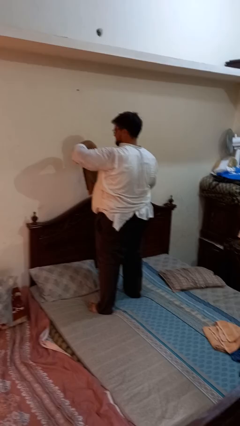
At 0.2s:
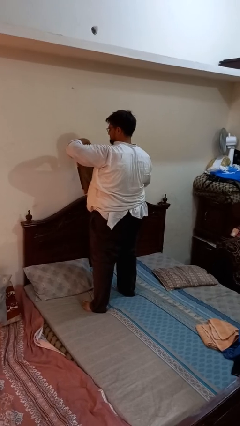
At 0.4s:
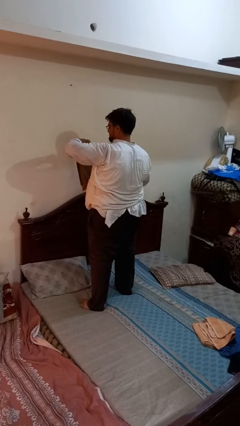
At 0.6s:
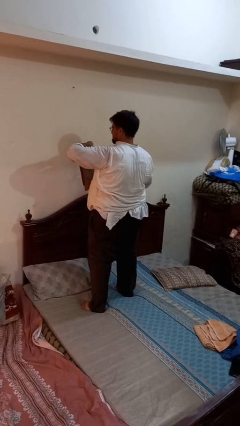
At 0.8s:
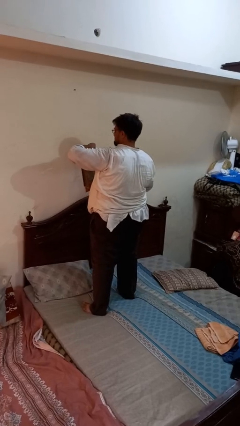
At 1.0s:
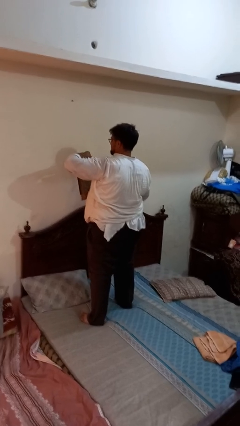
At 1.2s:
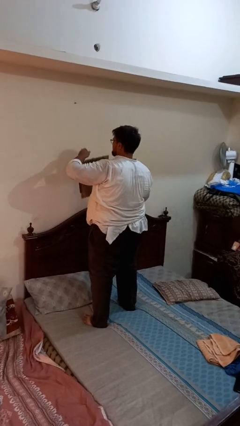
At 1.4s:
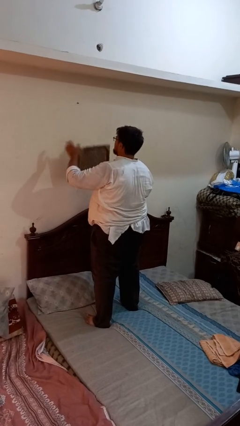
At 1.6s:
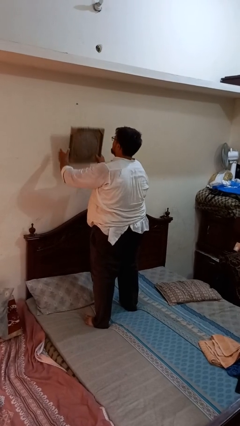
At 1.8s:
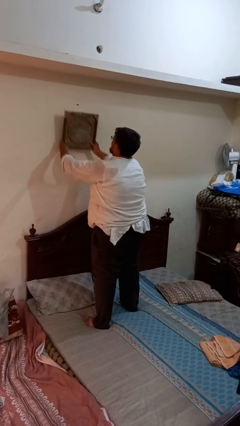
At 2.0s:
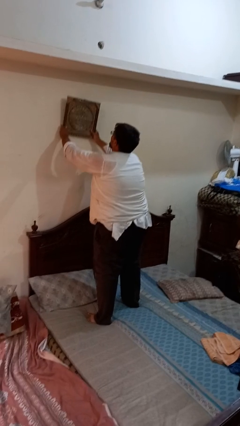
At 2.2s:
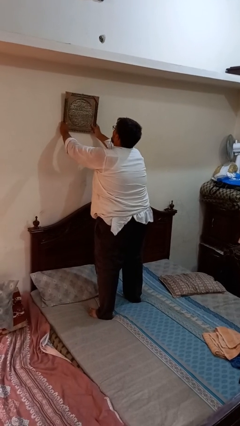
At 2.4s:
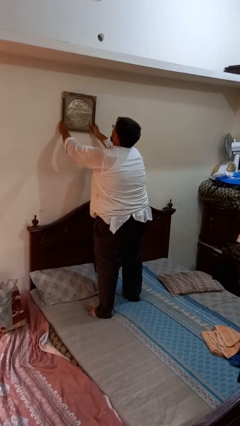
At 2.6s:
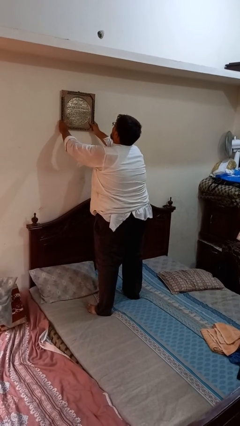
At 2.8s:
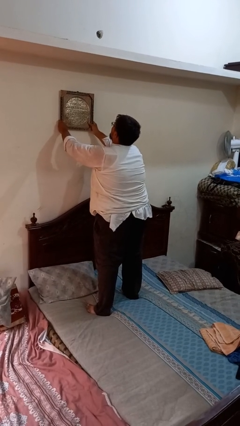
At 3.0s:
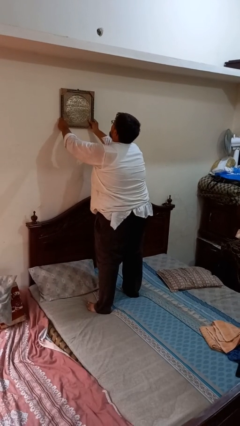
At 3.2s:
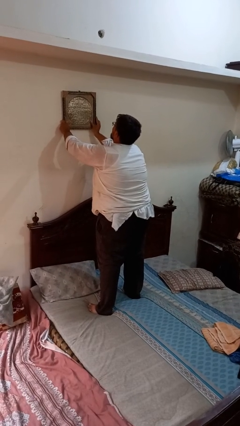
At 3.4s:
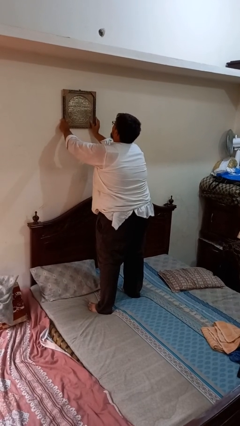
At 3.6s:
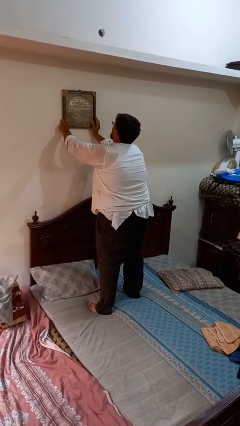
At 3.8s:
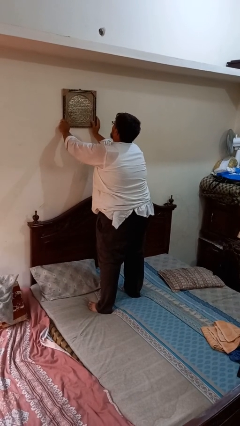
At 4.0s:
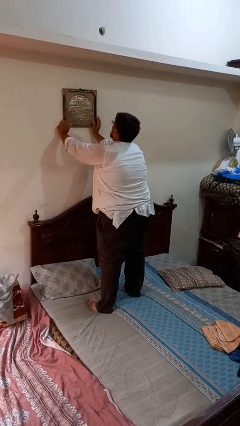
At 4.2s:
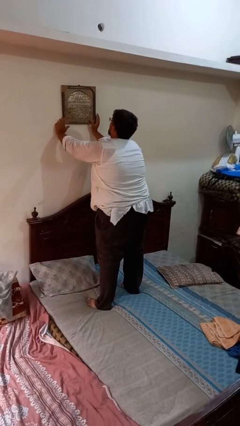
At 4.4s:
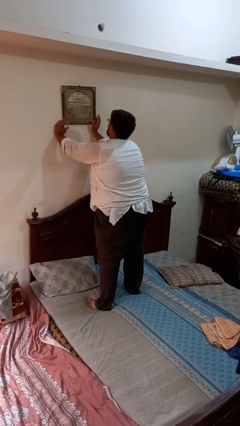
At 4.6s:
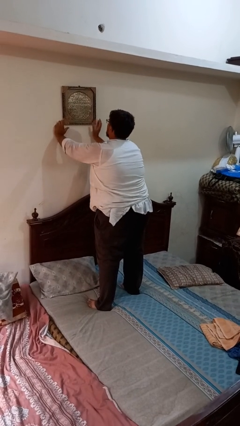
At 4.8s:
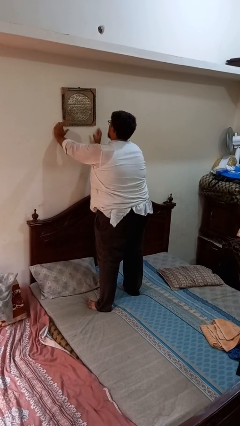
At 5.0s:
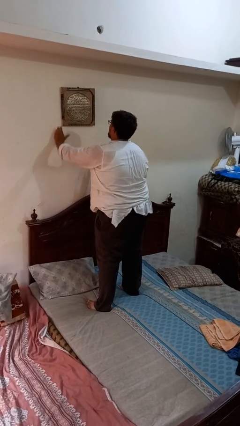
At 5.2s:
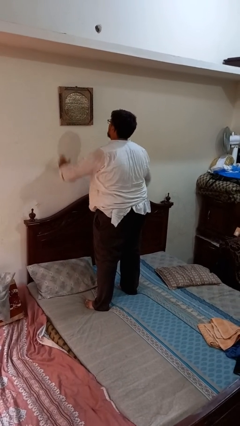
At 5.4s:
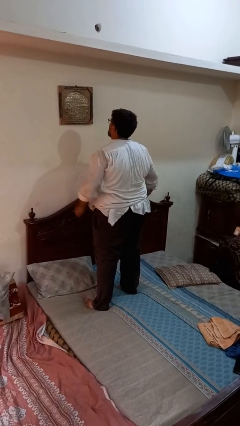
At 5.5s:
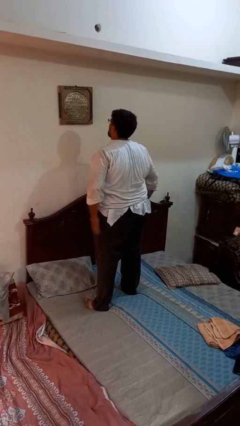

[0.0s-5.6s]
person puts up picture frame

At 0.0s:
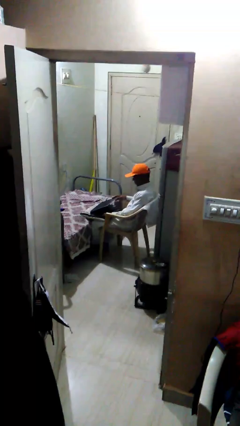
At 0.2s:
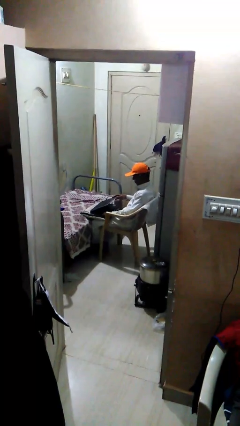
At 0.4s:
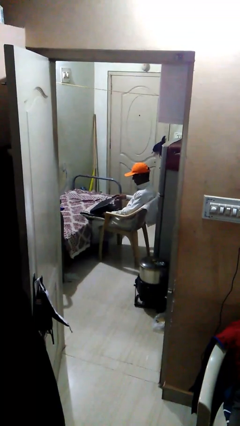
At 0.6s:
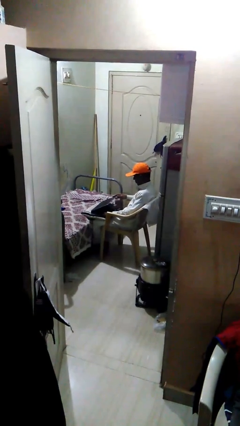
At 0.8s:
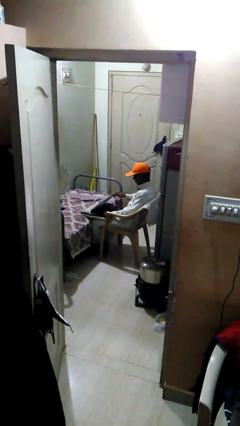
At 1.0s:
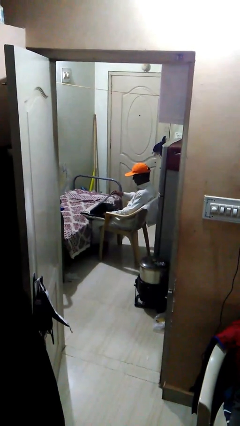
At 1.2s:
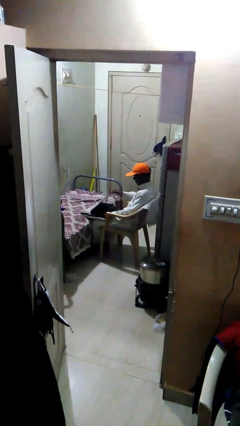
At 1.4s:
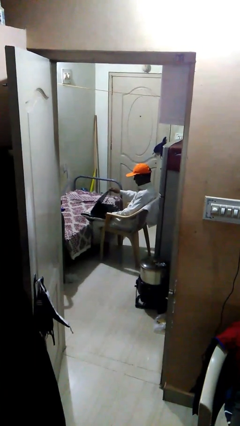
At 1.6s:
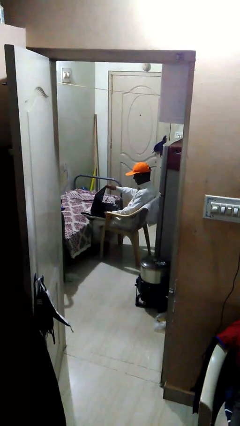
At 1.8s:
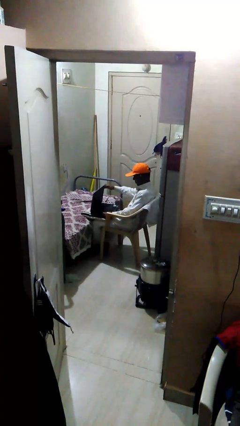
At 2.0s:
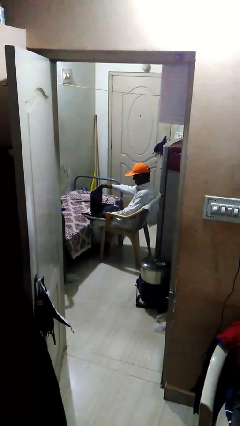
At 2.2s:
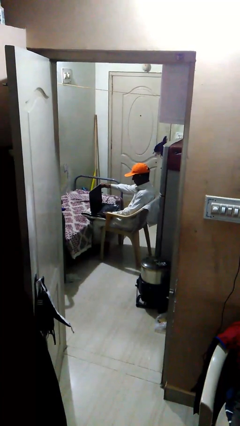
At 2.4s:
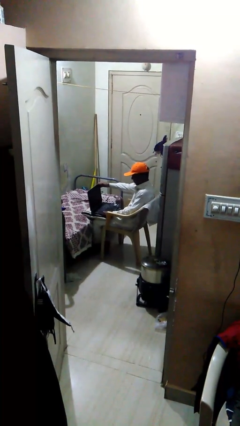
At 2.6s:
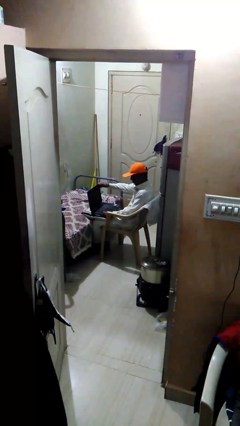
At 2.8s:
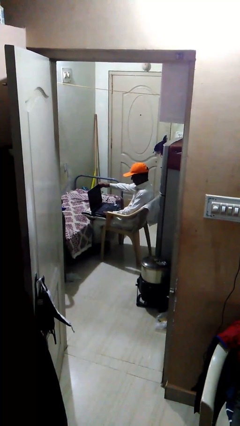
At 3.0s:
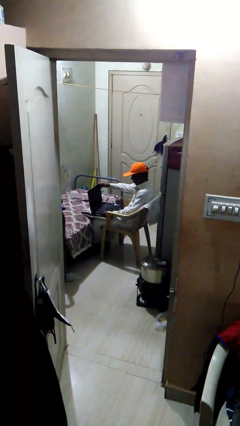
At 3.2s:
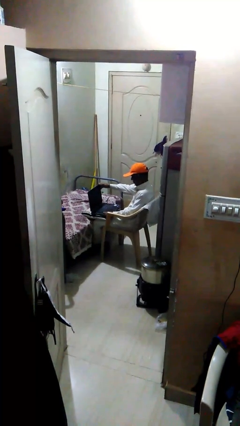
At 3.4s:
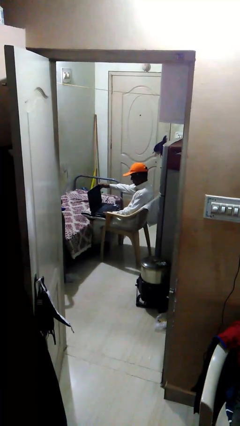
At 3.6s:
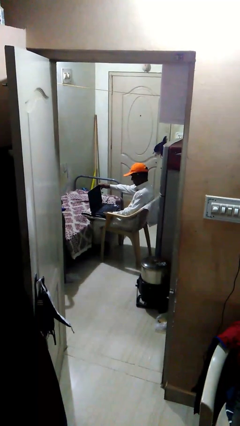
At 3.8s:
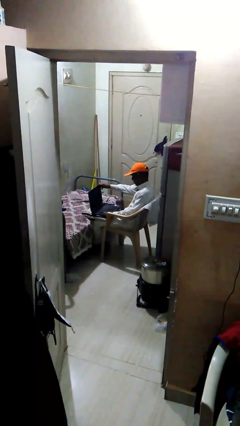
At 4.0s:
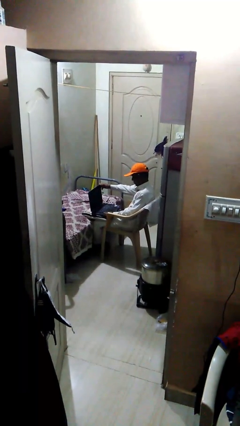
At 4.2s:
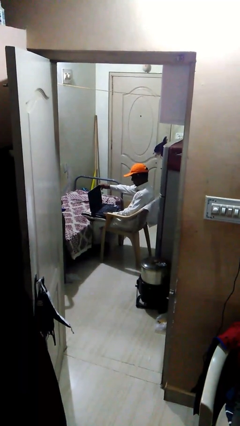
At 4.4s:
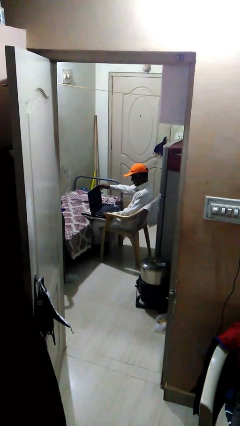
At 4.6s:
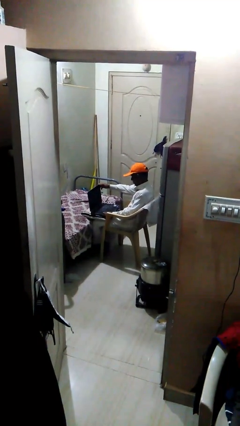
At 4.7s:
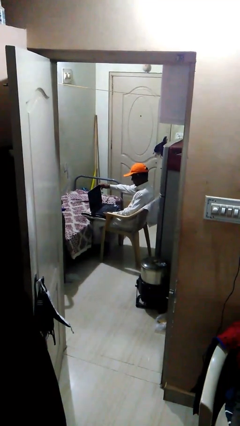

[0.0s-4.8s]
person interacts with laptop

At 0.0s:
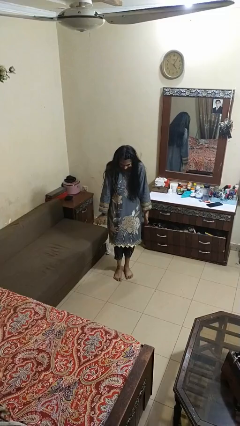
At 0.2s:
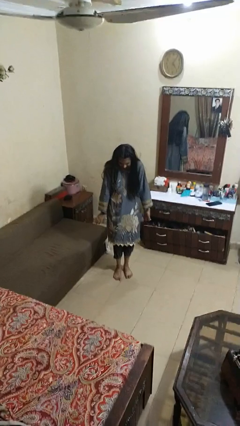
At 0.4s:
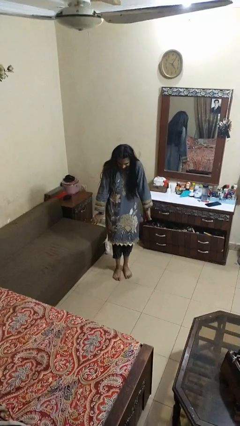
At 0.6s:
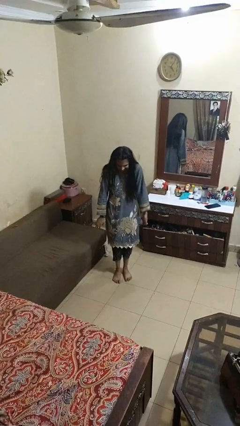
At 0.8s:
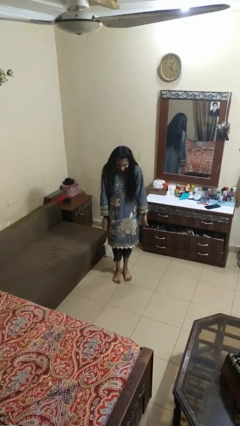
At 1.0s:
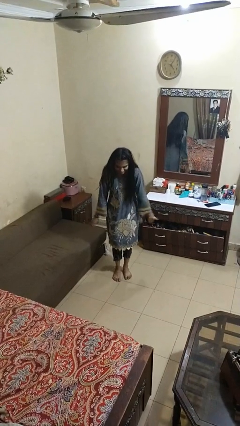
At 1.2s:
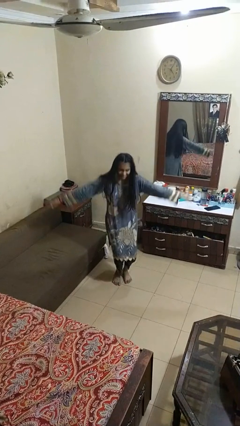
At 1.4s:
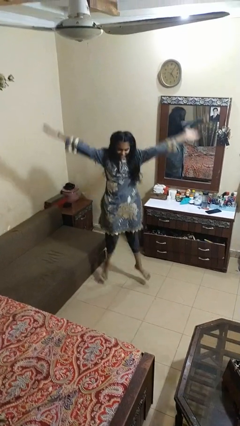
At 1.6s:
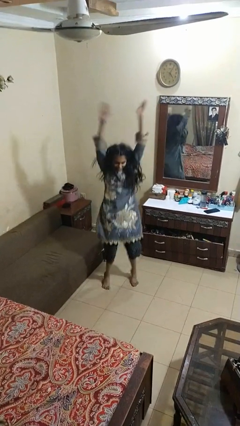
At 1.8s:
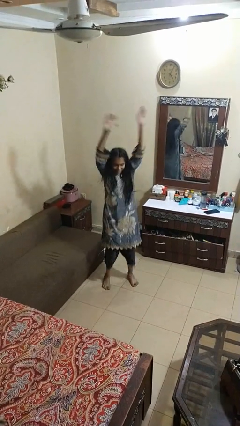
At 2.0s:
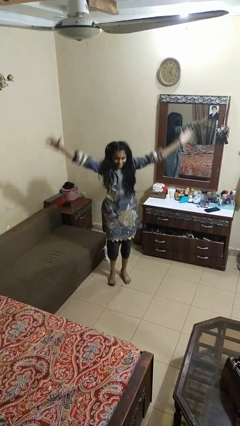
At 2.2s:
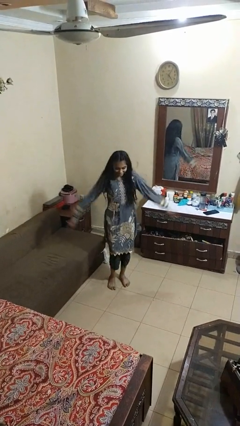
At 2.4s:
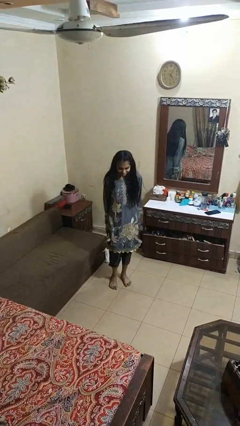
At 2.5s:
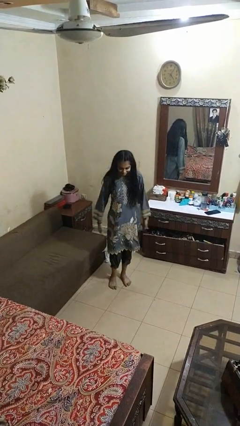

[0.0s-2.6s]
person exercises with jumping jacks

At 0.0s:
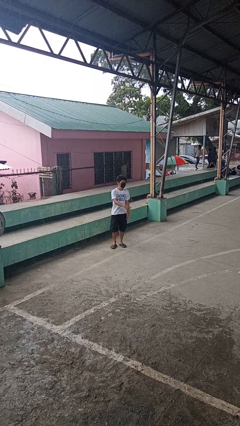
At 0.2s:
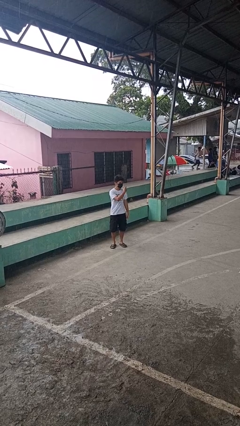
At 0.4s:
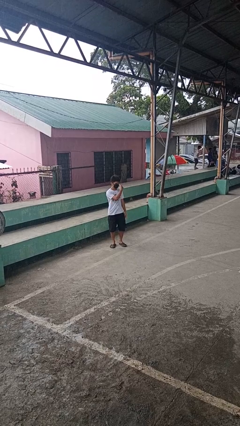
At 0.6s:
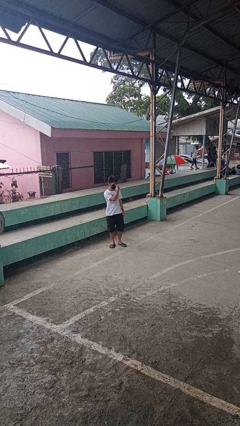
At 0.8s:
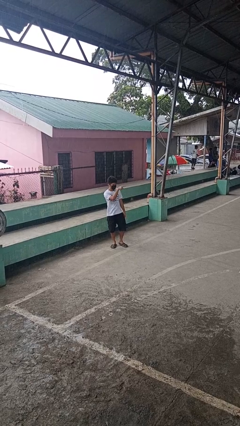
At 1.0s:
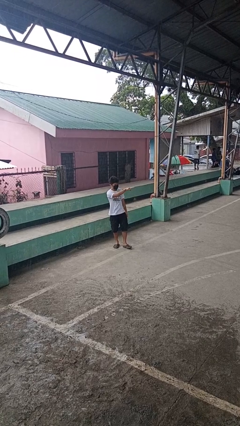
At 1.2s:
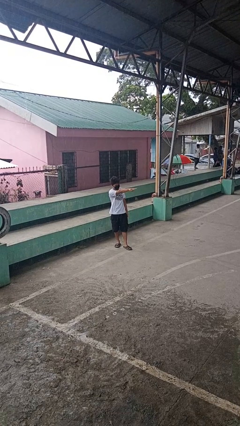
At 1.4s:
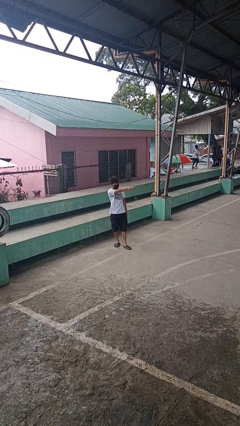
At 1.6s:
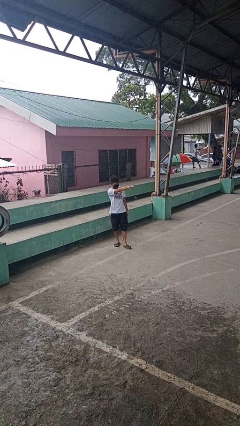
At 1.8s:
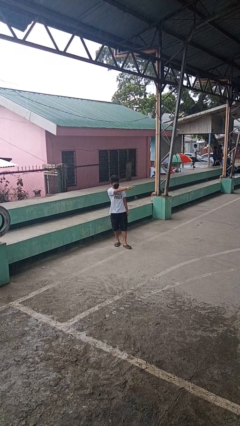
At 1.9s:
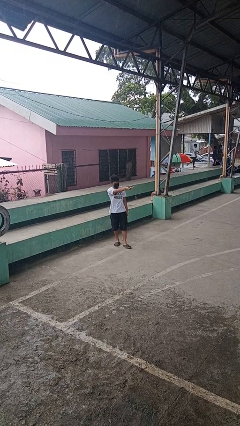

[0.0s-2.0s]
person gestures watch closely

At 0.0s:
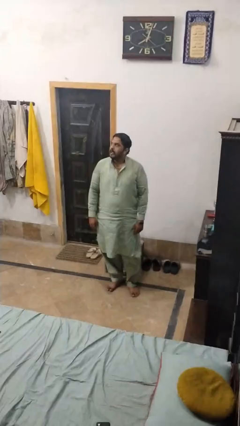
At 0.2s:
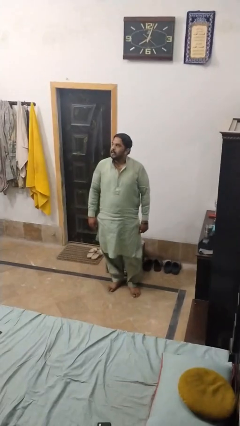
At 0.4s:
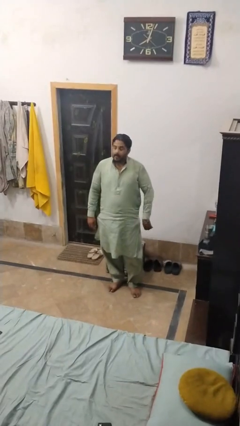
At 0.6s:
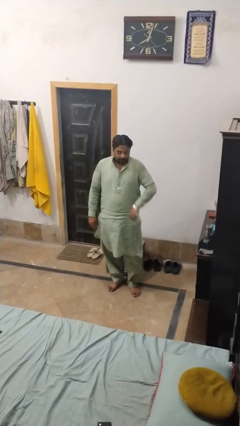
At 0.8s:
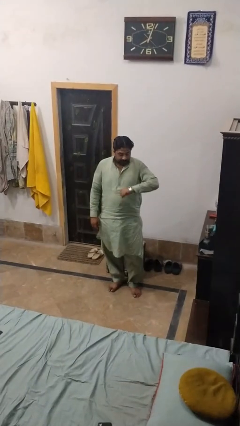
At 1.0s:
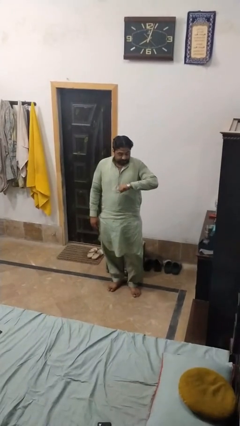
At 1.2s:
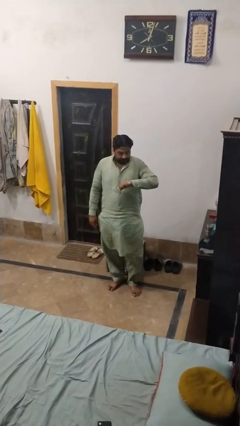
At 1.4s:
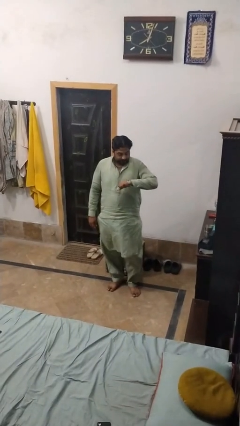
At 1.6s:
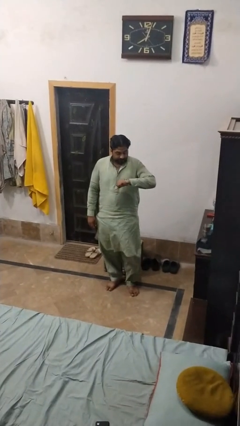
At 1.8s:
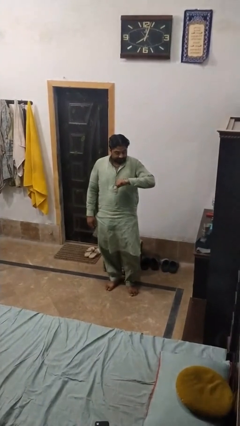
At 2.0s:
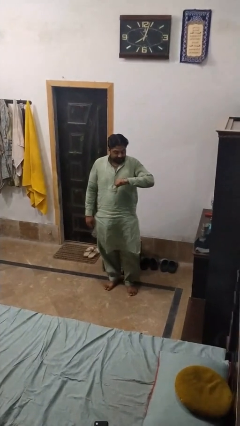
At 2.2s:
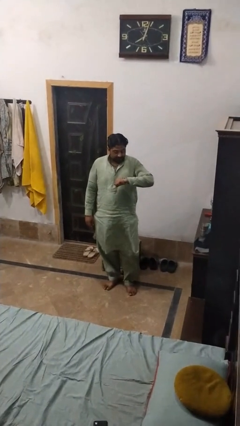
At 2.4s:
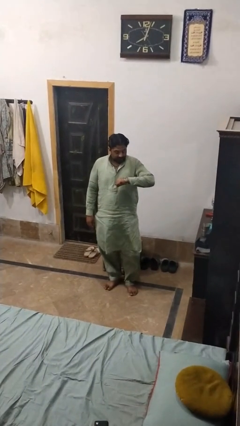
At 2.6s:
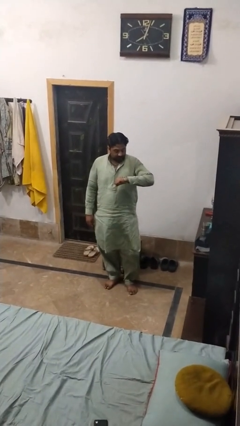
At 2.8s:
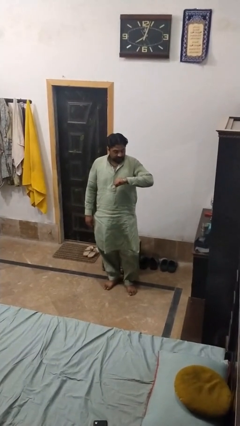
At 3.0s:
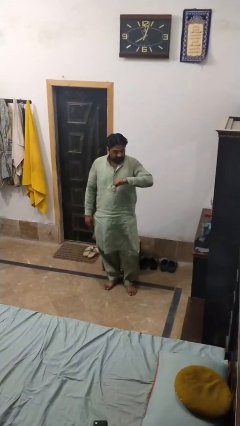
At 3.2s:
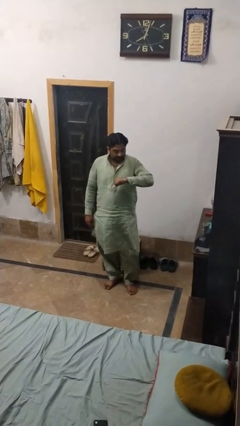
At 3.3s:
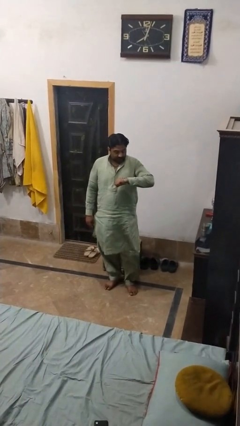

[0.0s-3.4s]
person looks at wristwatch
